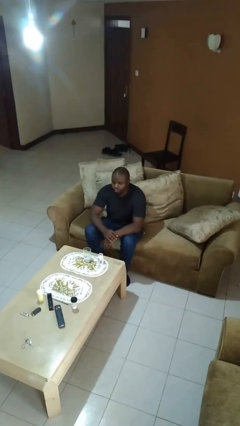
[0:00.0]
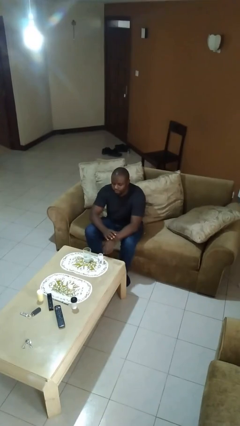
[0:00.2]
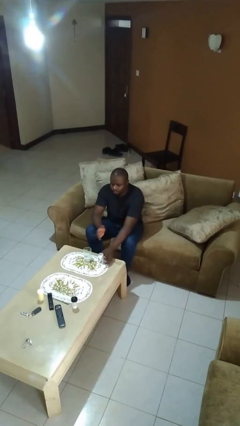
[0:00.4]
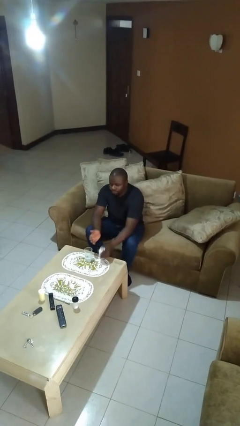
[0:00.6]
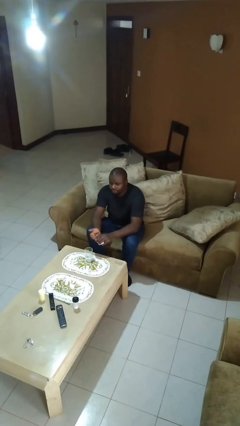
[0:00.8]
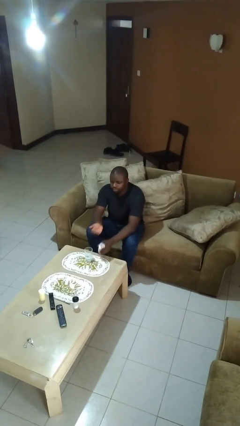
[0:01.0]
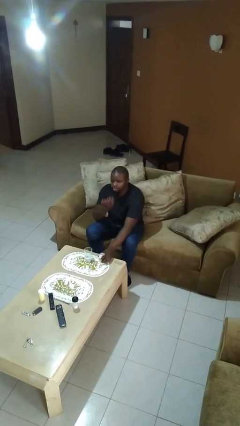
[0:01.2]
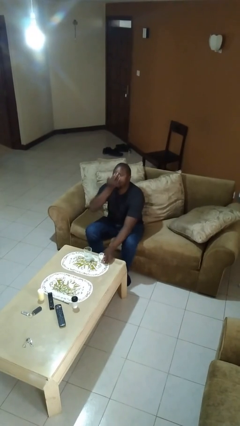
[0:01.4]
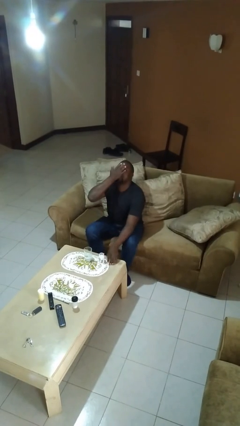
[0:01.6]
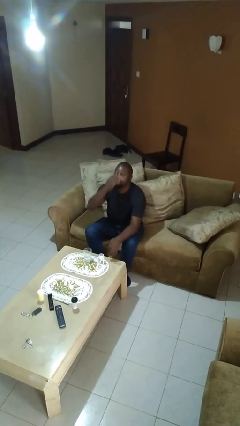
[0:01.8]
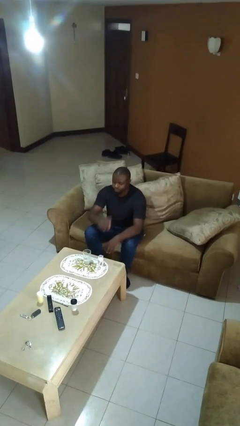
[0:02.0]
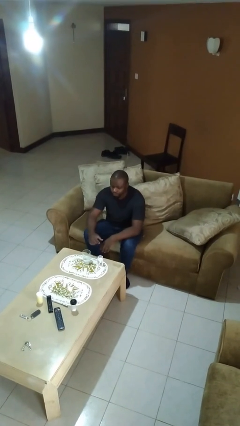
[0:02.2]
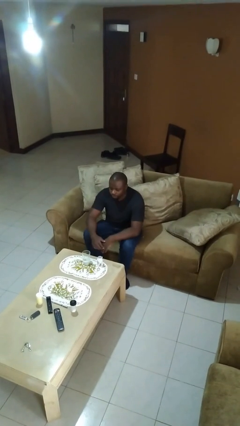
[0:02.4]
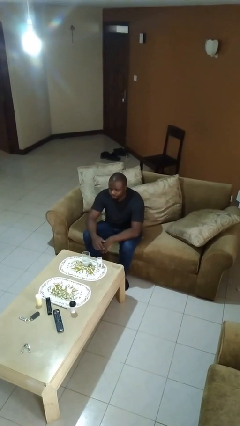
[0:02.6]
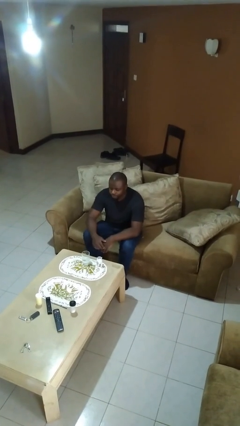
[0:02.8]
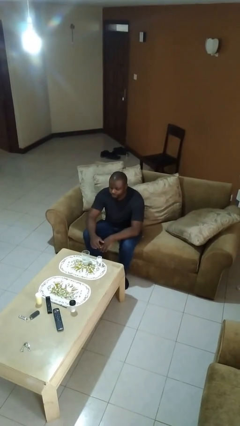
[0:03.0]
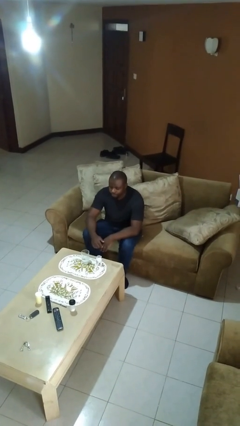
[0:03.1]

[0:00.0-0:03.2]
person takes medicine pills

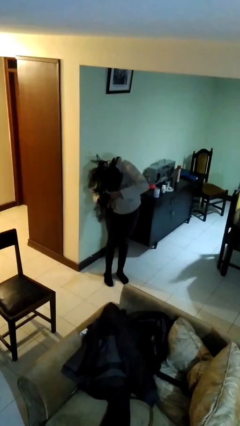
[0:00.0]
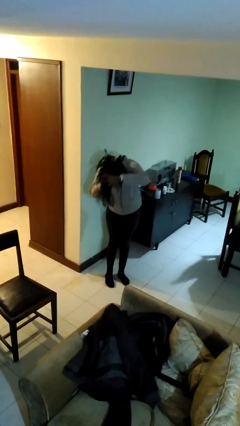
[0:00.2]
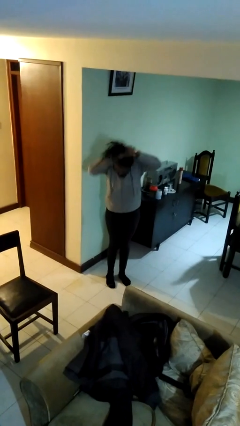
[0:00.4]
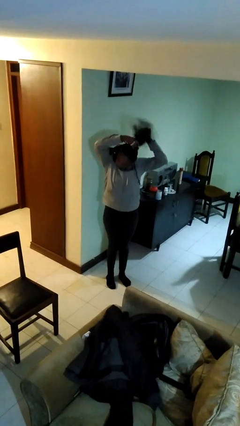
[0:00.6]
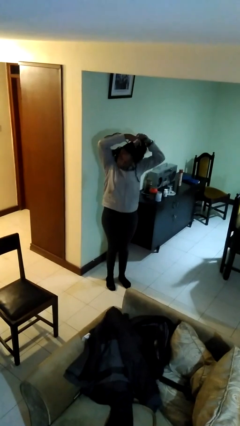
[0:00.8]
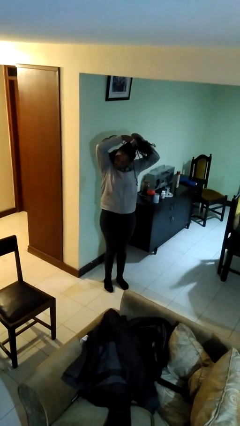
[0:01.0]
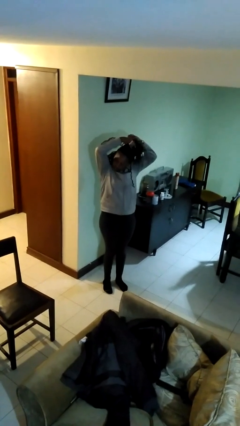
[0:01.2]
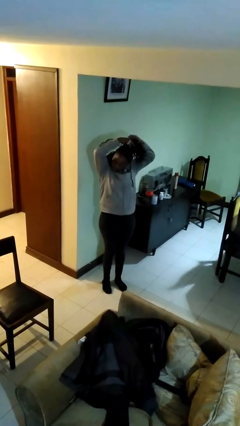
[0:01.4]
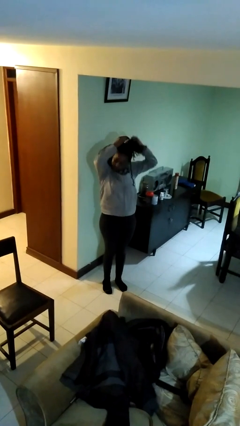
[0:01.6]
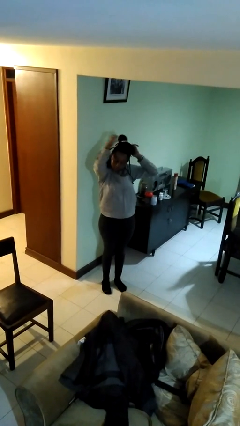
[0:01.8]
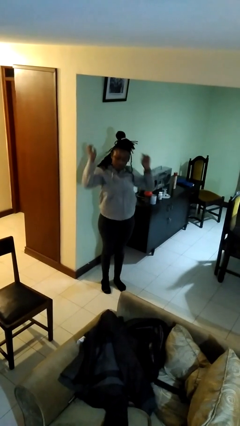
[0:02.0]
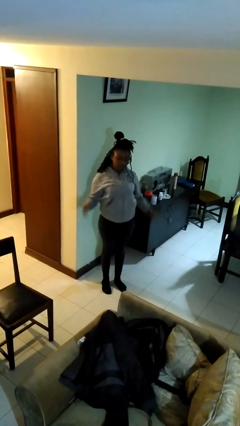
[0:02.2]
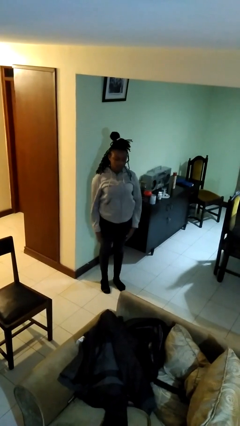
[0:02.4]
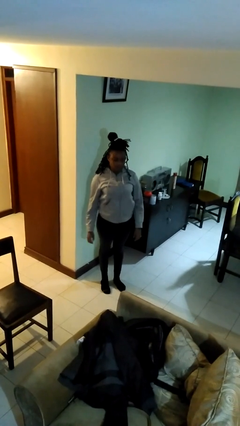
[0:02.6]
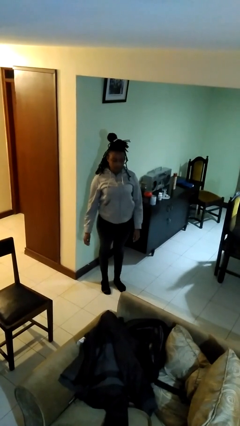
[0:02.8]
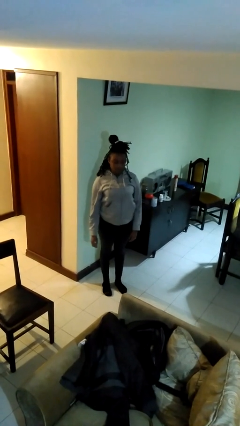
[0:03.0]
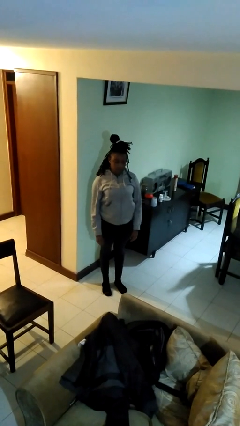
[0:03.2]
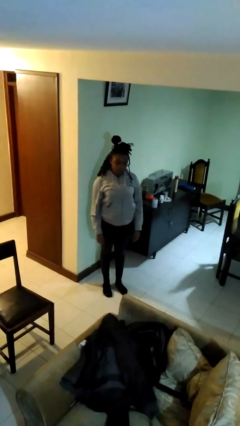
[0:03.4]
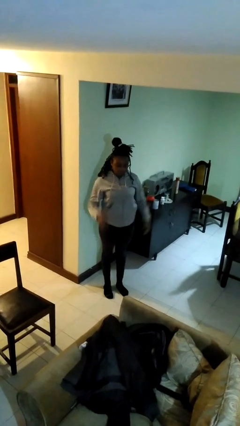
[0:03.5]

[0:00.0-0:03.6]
person puts hair in ponytail

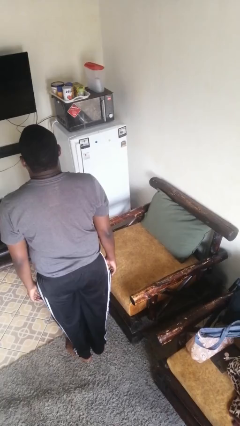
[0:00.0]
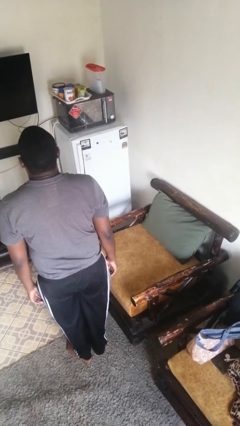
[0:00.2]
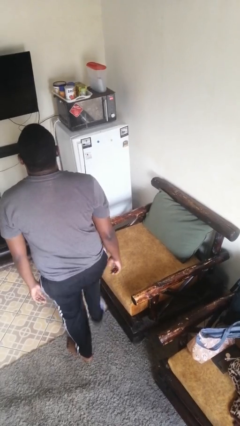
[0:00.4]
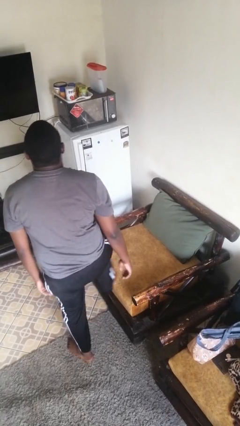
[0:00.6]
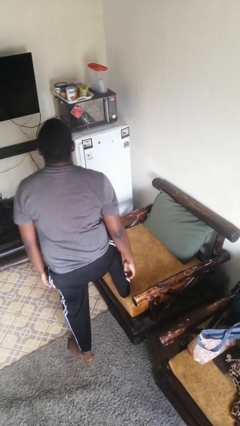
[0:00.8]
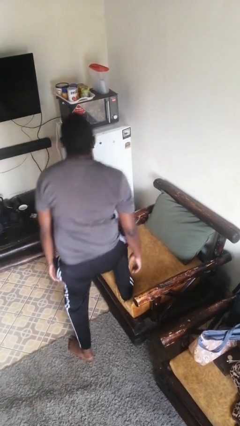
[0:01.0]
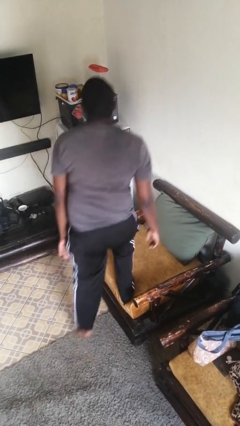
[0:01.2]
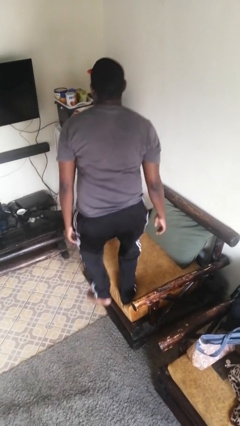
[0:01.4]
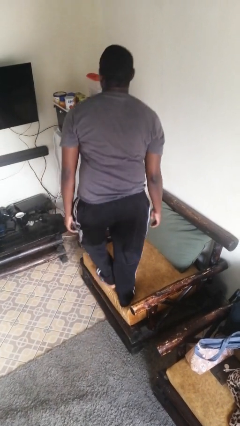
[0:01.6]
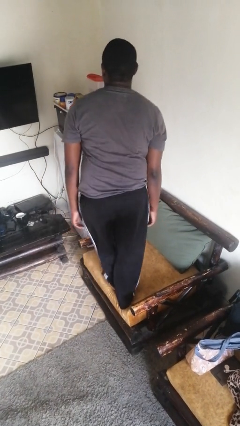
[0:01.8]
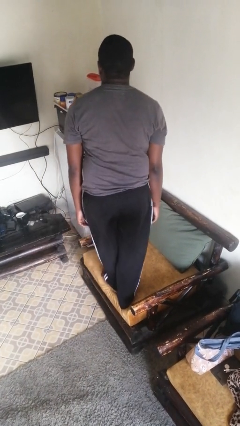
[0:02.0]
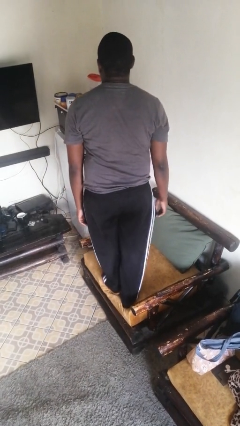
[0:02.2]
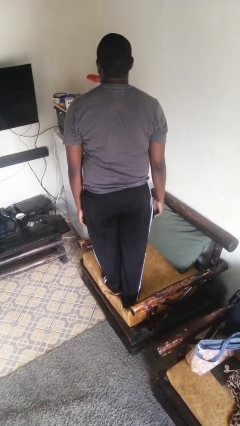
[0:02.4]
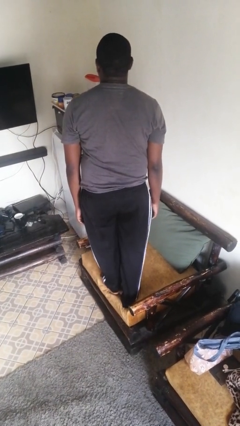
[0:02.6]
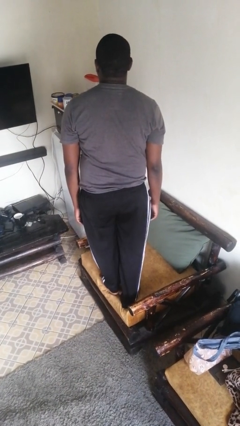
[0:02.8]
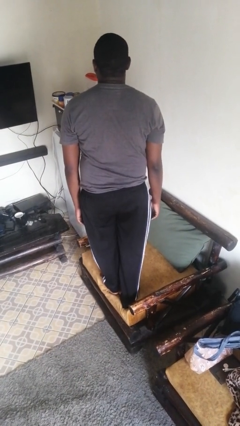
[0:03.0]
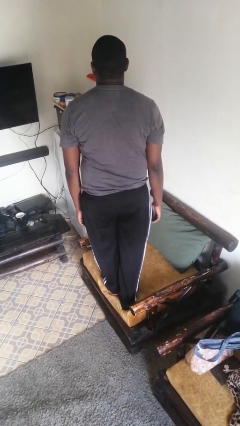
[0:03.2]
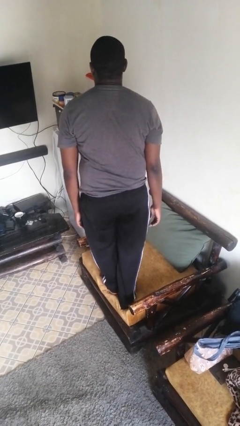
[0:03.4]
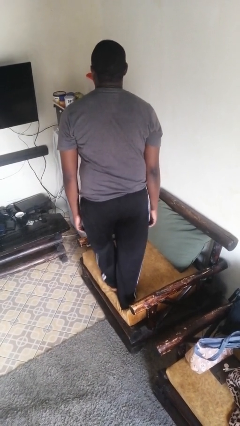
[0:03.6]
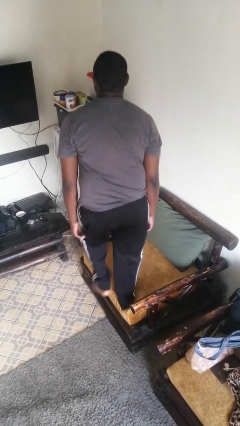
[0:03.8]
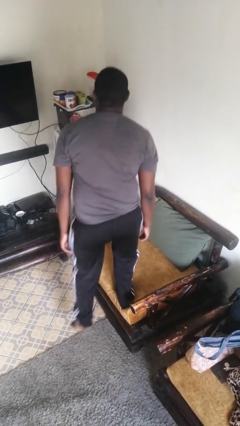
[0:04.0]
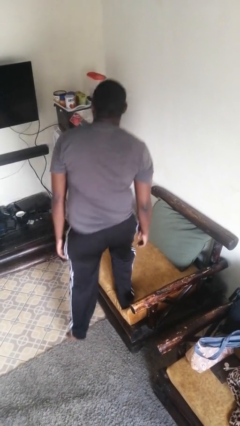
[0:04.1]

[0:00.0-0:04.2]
person climbs on couch

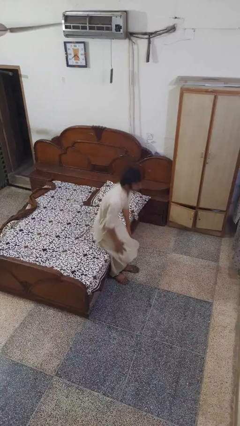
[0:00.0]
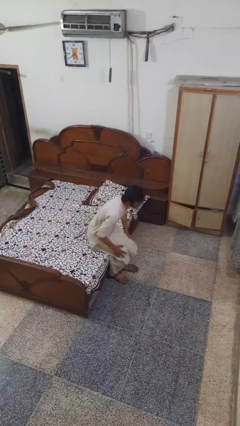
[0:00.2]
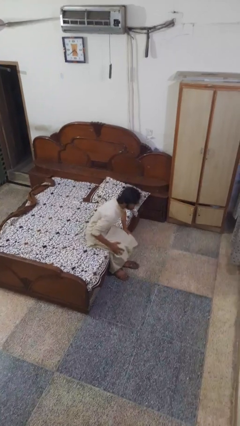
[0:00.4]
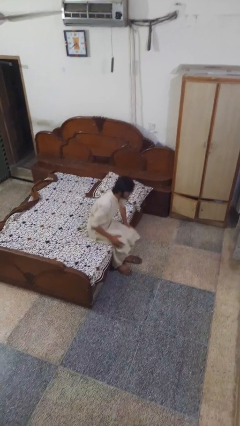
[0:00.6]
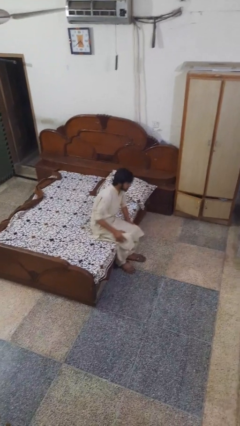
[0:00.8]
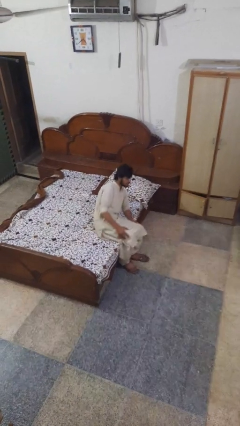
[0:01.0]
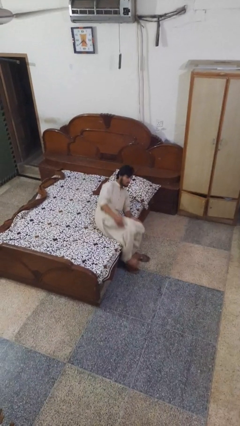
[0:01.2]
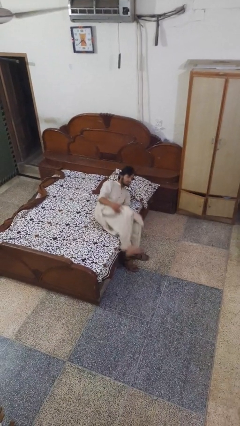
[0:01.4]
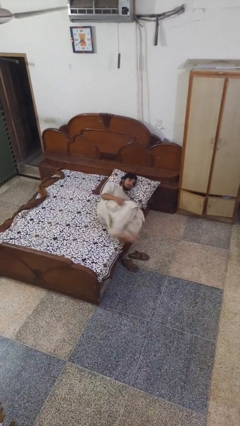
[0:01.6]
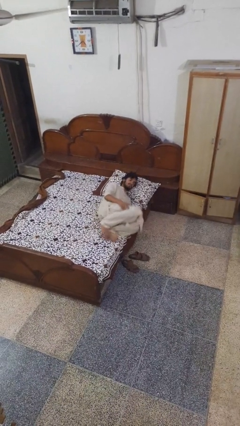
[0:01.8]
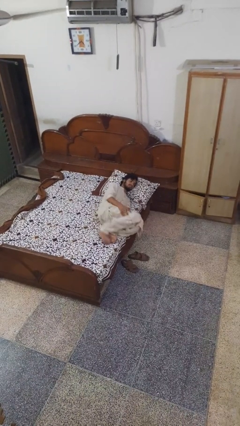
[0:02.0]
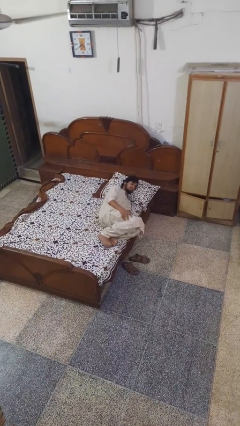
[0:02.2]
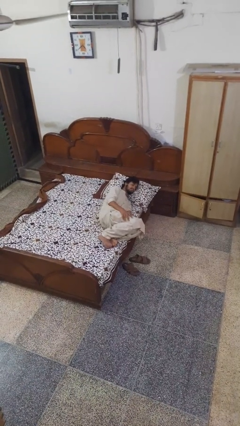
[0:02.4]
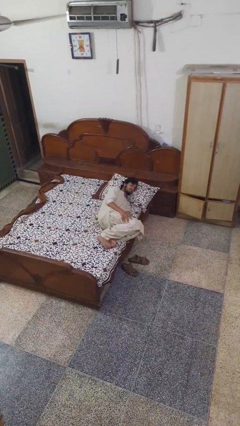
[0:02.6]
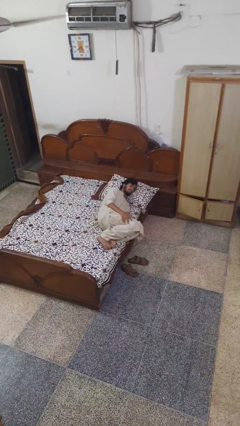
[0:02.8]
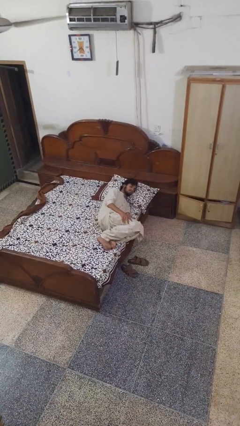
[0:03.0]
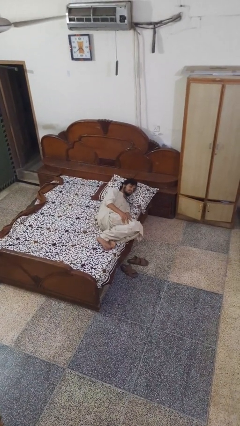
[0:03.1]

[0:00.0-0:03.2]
person lies down on bed

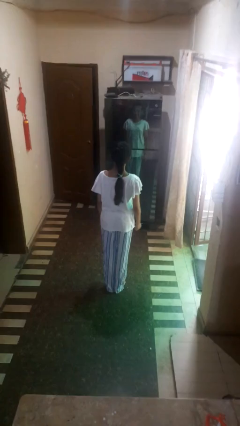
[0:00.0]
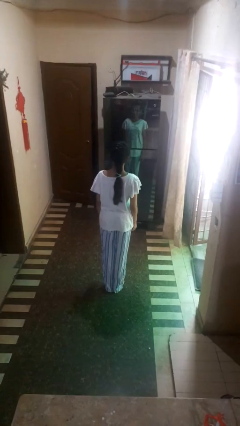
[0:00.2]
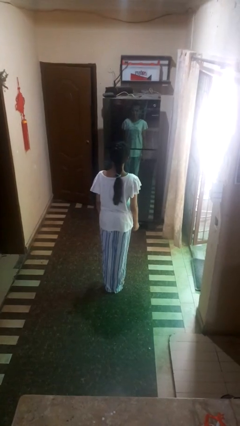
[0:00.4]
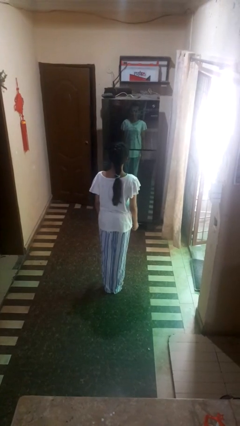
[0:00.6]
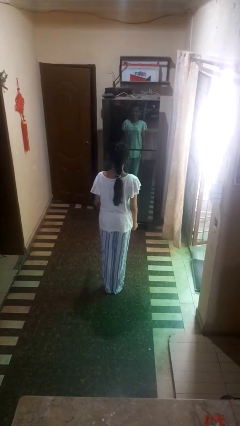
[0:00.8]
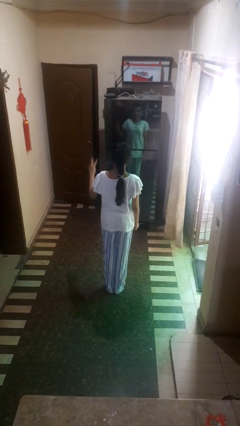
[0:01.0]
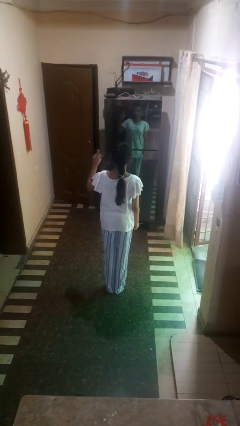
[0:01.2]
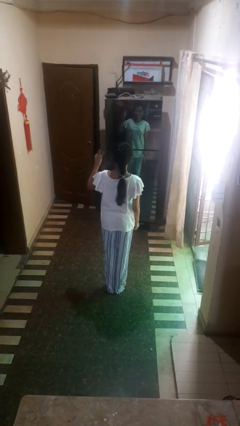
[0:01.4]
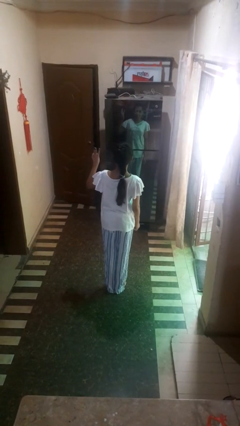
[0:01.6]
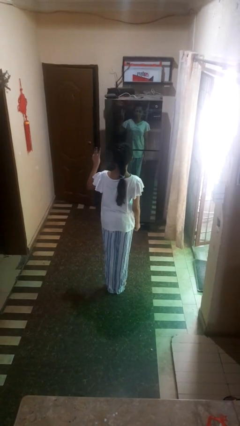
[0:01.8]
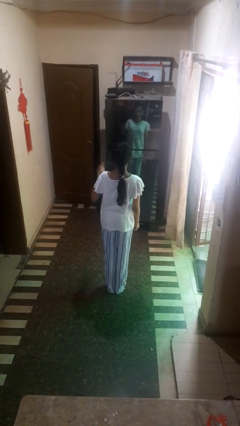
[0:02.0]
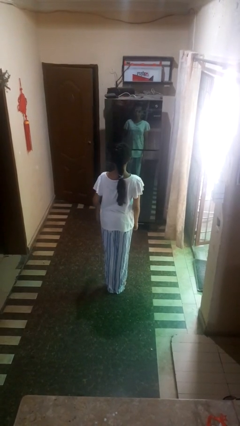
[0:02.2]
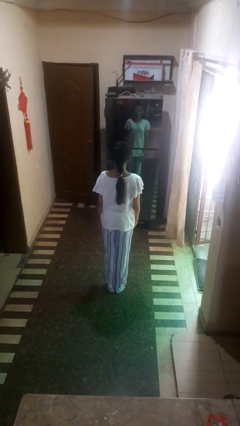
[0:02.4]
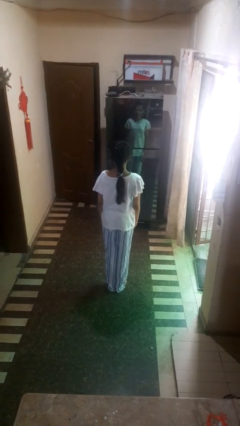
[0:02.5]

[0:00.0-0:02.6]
person gestures number three

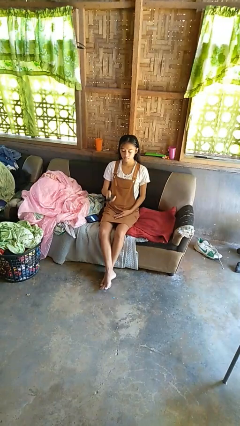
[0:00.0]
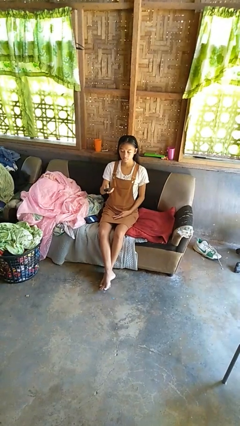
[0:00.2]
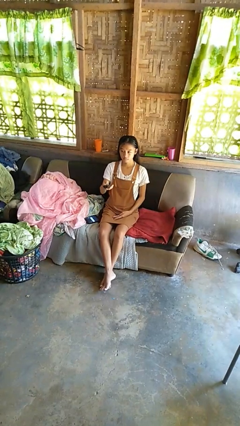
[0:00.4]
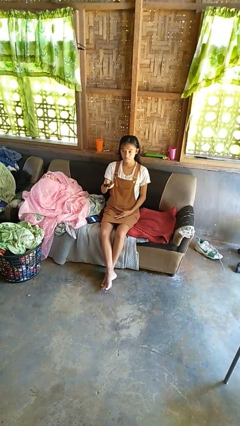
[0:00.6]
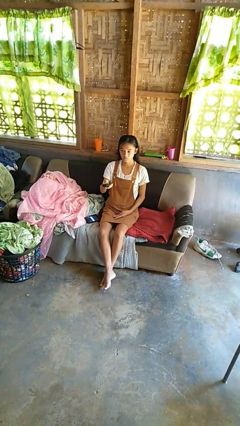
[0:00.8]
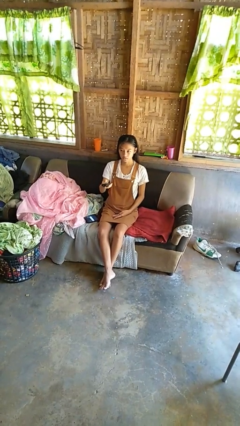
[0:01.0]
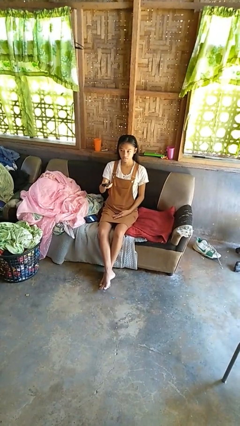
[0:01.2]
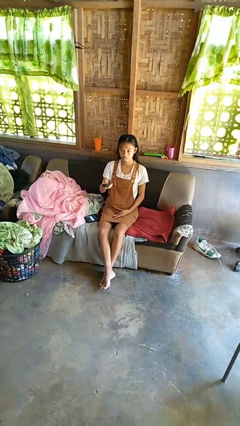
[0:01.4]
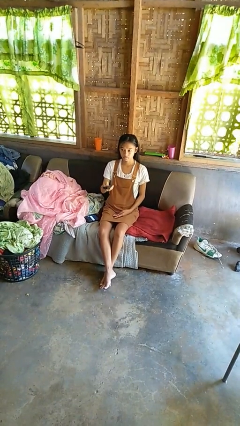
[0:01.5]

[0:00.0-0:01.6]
person uses television remote
